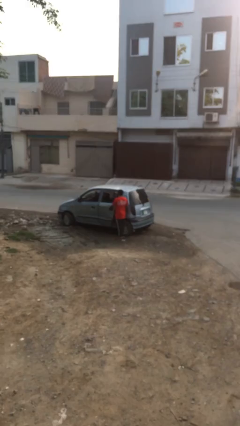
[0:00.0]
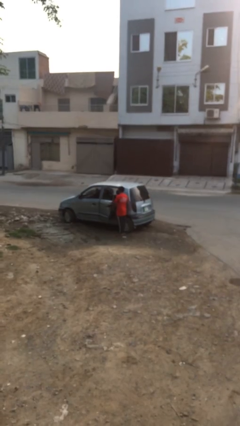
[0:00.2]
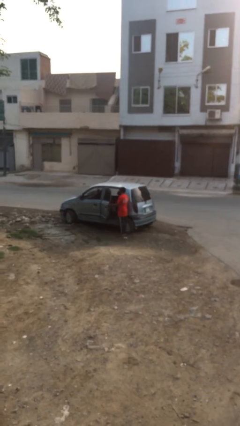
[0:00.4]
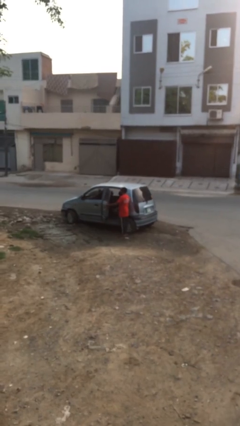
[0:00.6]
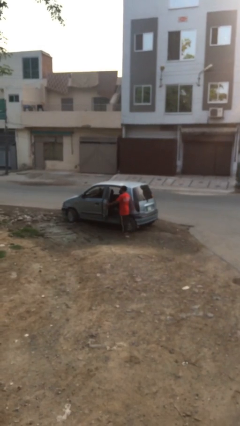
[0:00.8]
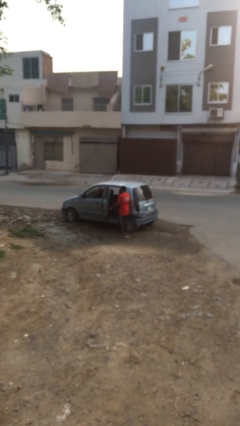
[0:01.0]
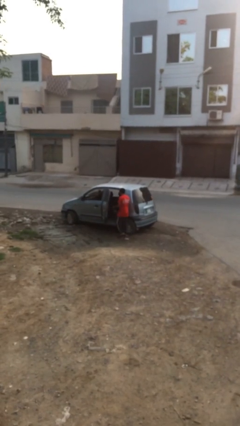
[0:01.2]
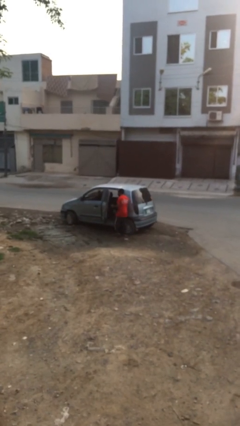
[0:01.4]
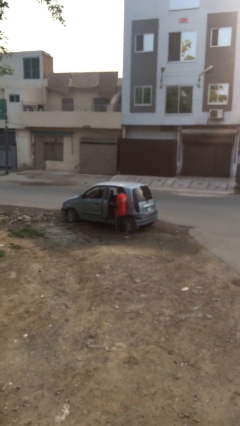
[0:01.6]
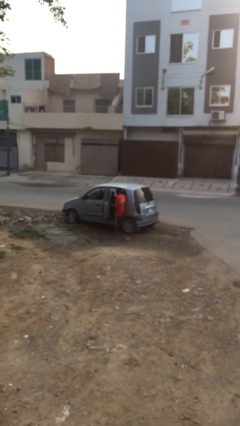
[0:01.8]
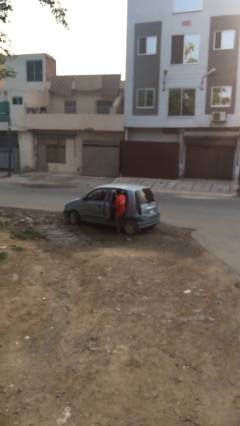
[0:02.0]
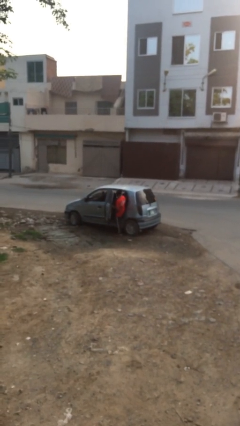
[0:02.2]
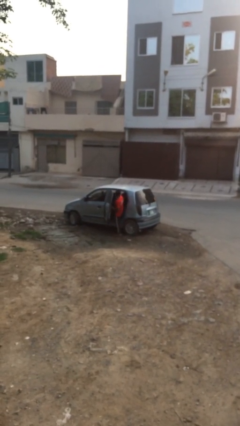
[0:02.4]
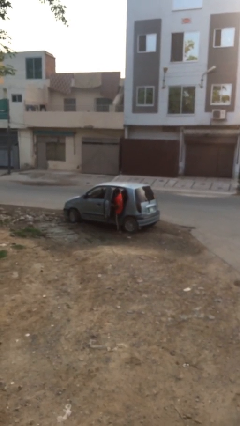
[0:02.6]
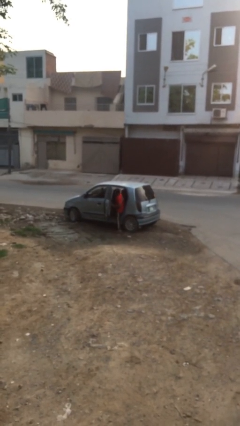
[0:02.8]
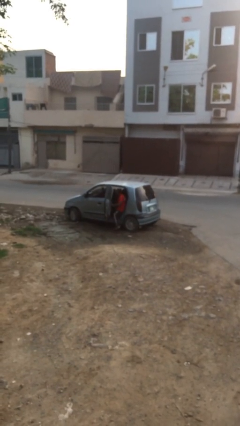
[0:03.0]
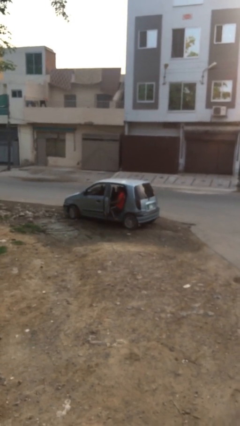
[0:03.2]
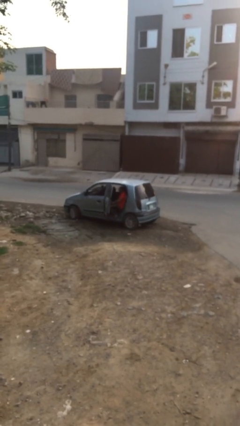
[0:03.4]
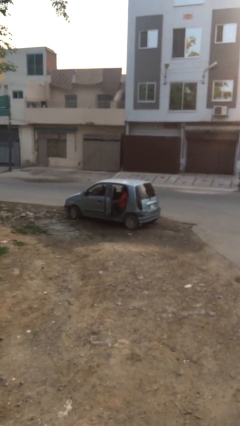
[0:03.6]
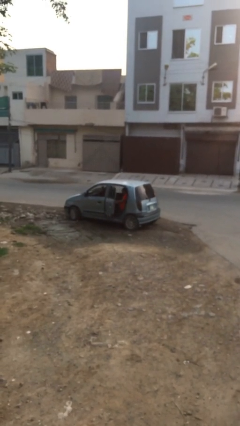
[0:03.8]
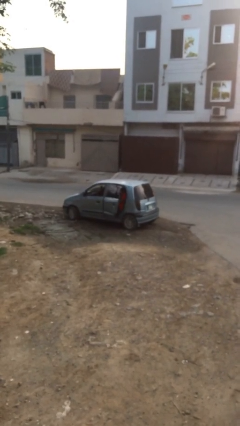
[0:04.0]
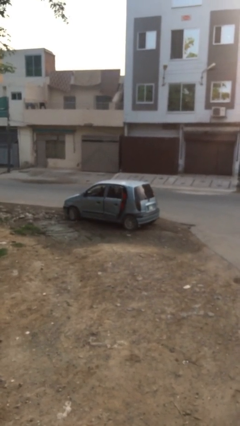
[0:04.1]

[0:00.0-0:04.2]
person enters car

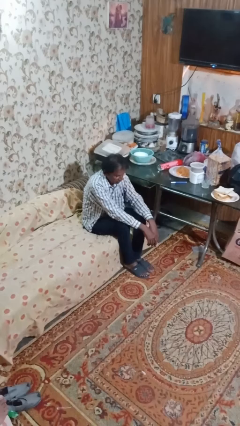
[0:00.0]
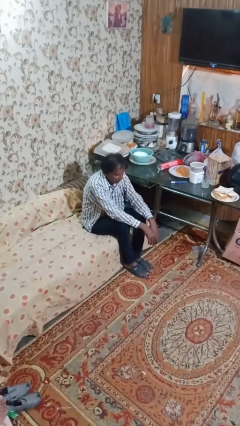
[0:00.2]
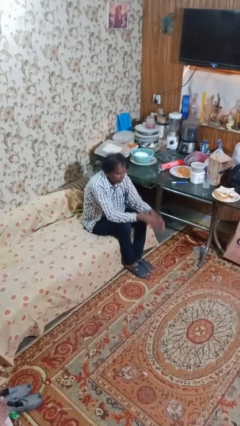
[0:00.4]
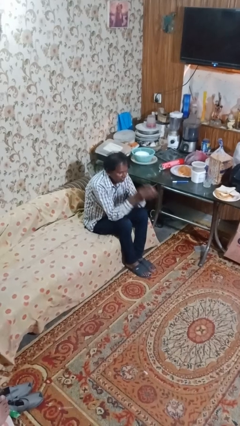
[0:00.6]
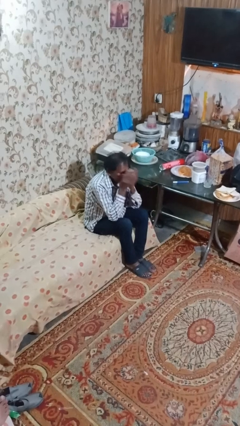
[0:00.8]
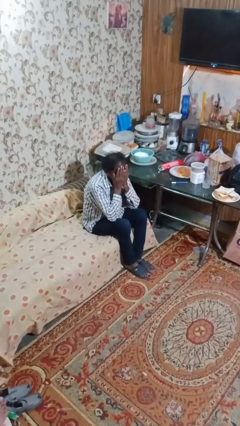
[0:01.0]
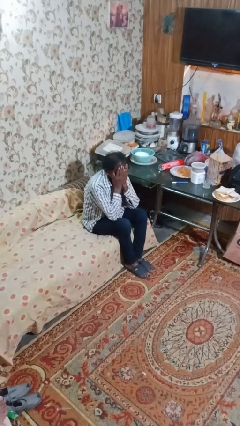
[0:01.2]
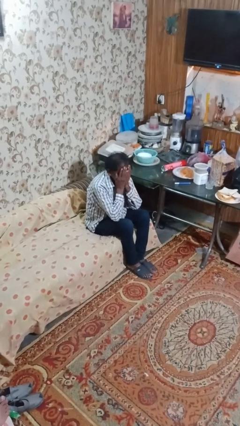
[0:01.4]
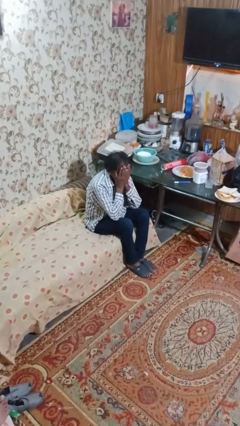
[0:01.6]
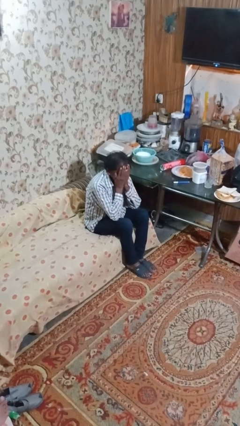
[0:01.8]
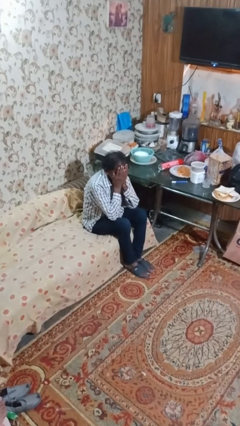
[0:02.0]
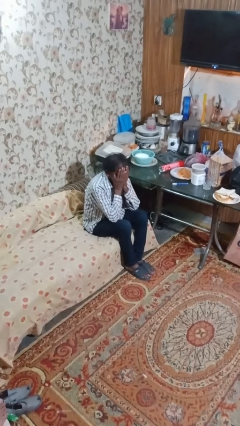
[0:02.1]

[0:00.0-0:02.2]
person covers face with hands

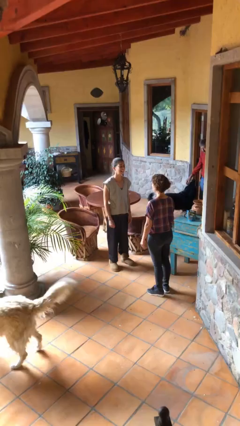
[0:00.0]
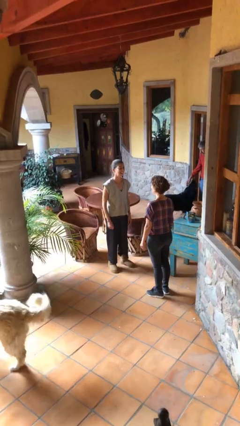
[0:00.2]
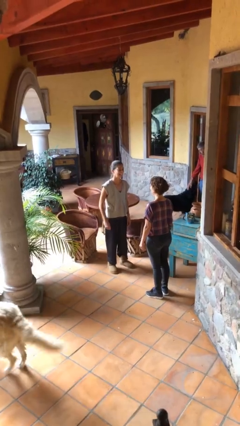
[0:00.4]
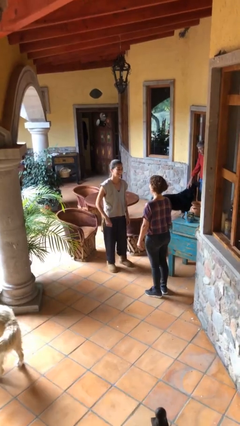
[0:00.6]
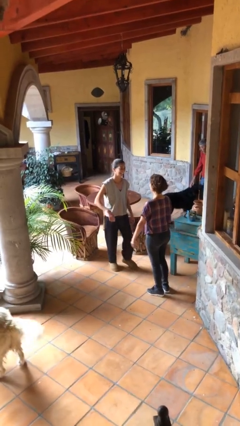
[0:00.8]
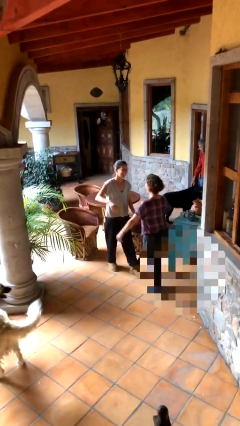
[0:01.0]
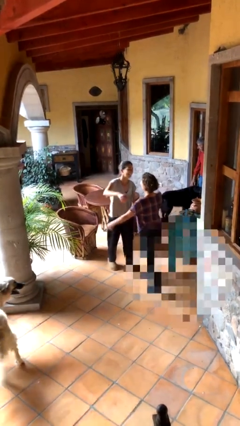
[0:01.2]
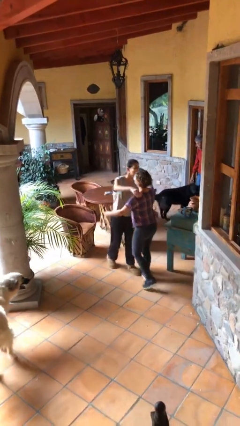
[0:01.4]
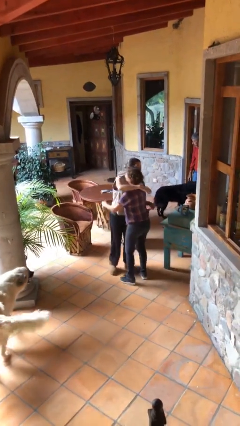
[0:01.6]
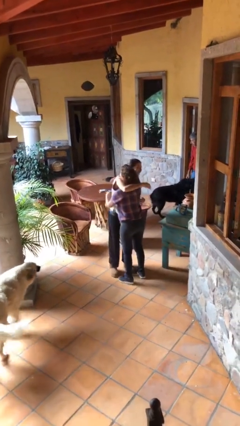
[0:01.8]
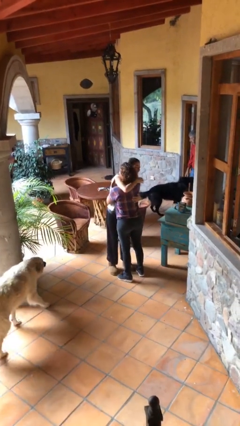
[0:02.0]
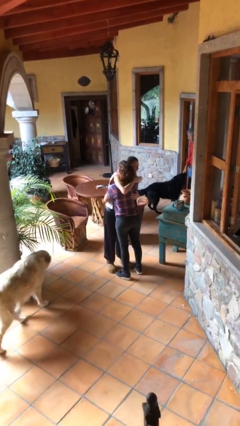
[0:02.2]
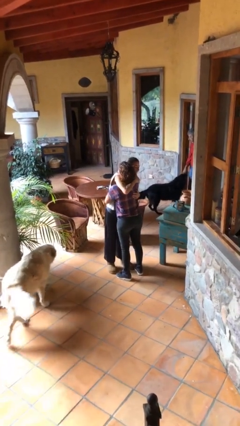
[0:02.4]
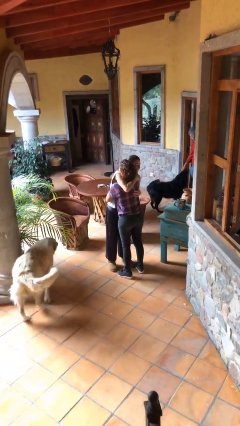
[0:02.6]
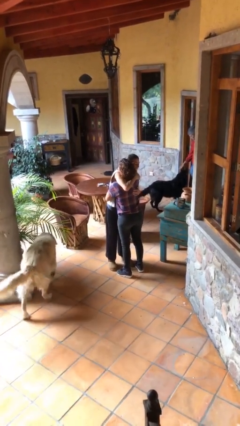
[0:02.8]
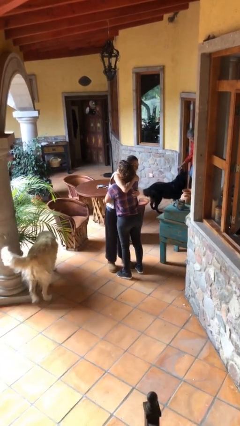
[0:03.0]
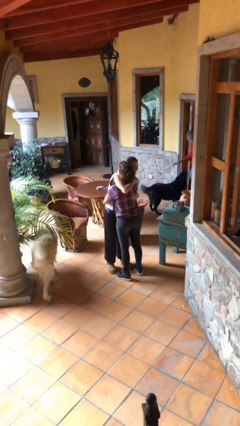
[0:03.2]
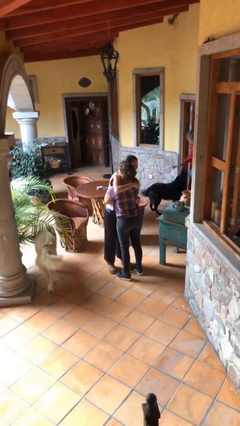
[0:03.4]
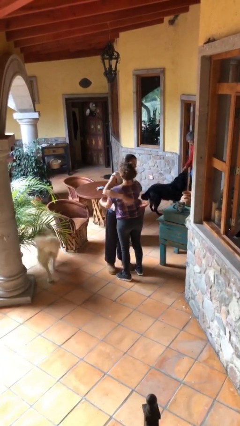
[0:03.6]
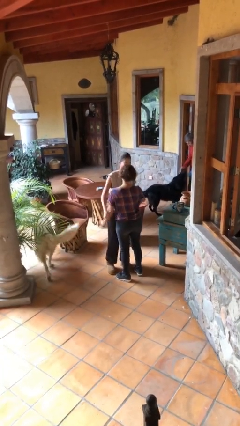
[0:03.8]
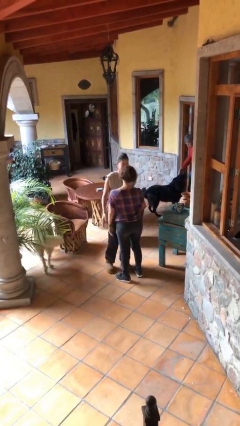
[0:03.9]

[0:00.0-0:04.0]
person embraces person

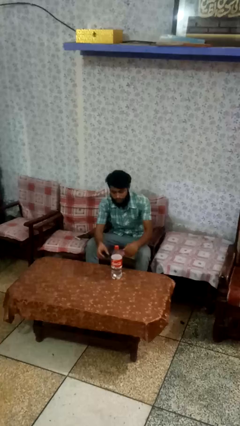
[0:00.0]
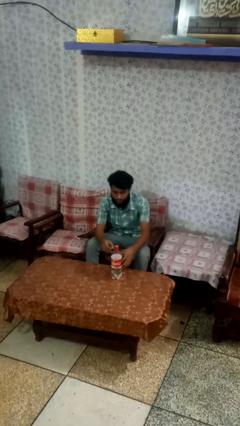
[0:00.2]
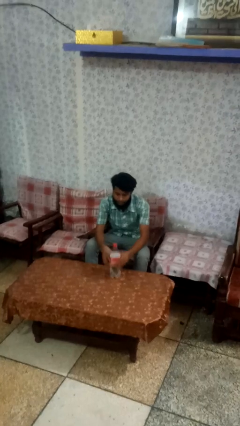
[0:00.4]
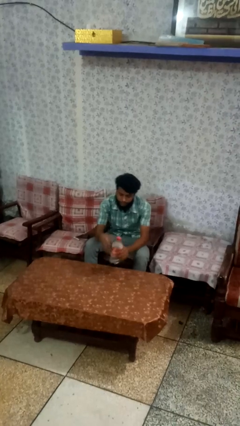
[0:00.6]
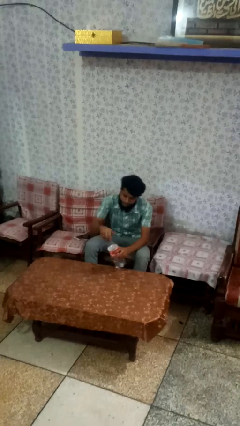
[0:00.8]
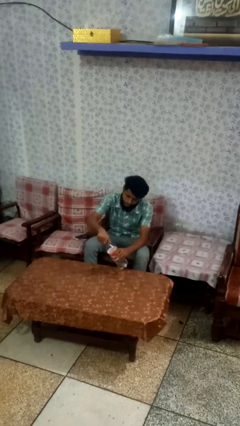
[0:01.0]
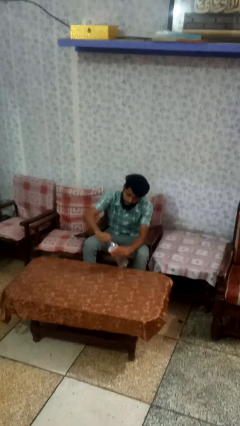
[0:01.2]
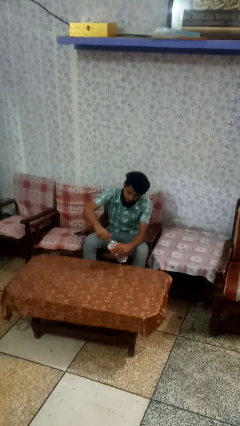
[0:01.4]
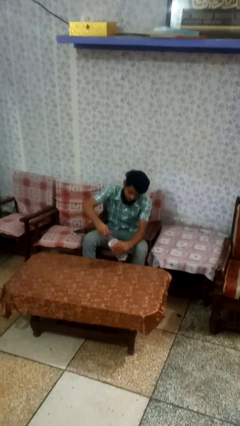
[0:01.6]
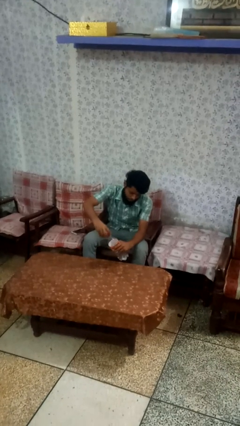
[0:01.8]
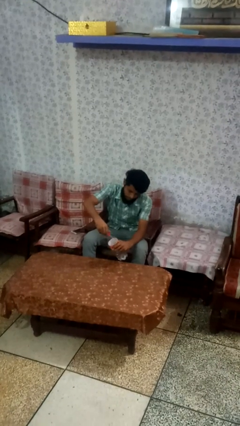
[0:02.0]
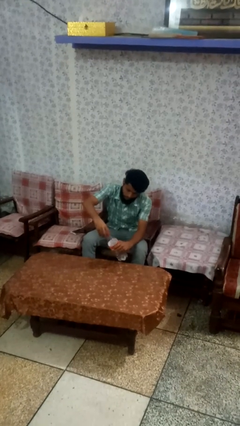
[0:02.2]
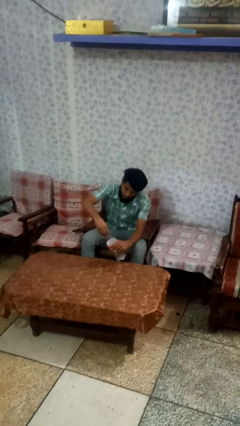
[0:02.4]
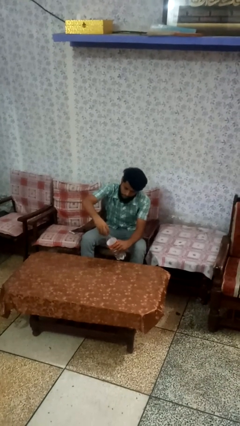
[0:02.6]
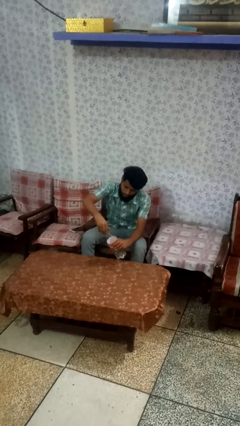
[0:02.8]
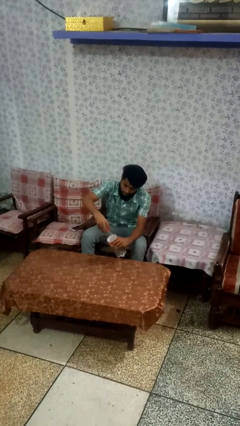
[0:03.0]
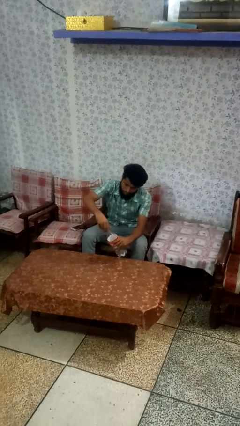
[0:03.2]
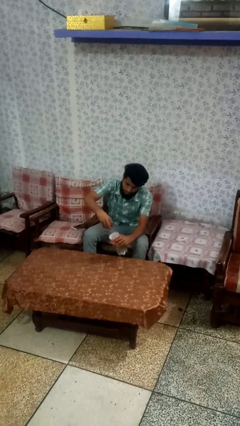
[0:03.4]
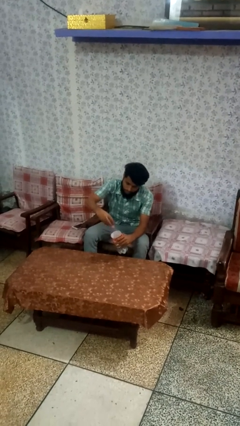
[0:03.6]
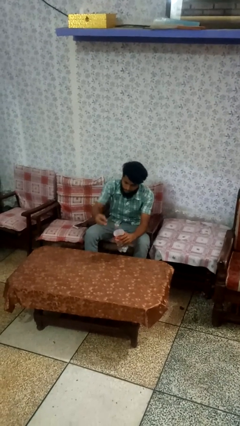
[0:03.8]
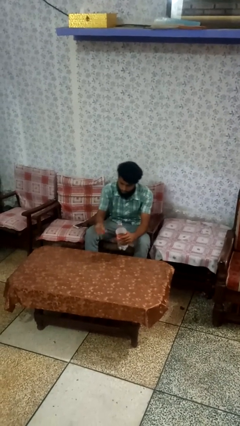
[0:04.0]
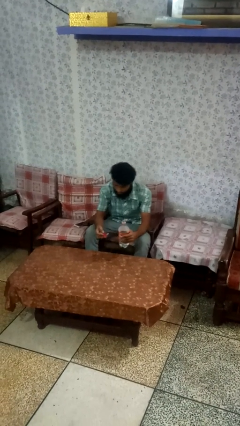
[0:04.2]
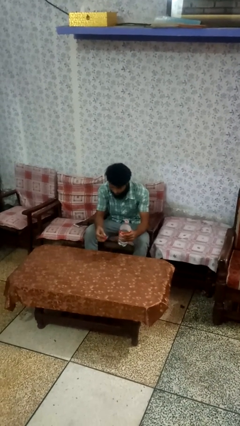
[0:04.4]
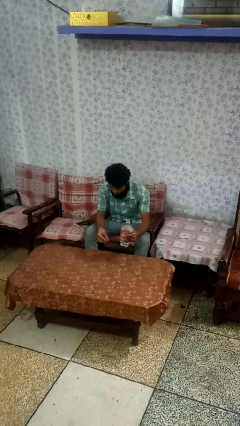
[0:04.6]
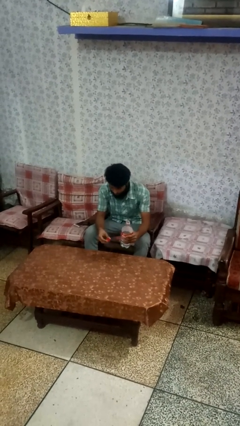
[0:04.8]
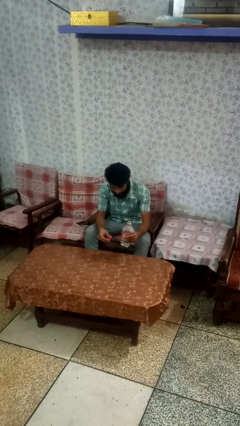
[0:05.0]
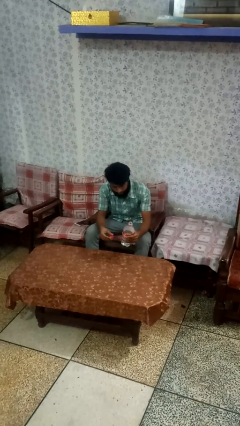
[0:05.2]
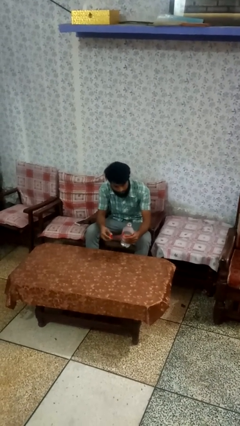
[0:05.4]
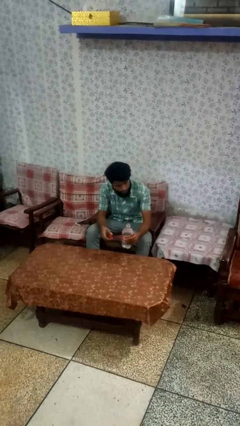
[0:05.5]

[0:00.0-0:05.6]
person unscrews lid from bottle

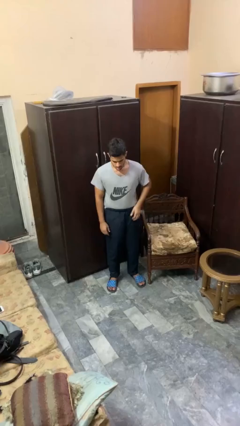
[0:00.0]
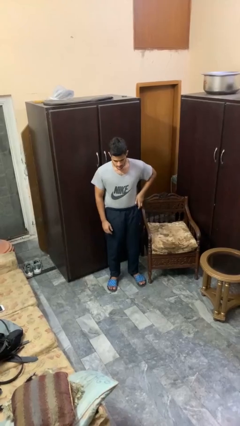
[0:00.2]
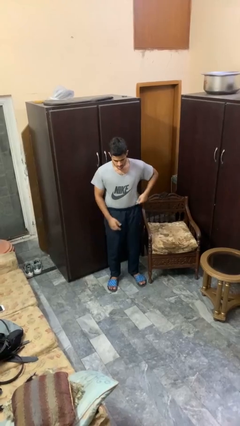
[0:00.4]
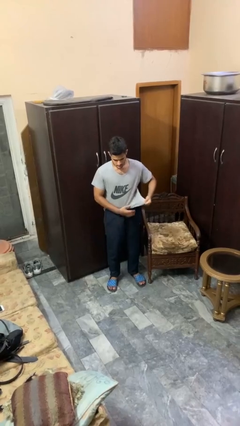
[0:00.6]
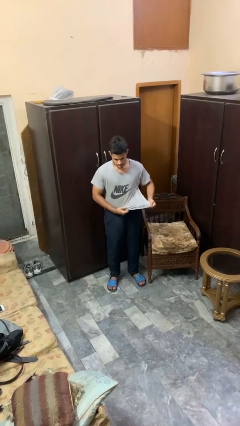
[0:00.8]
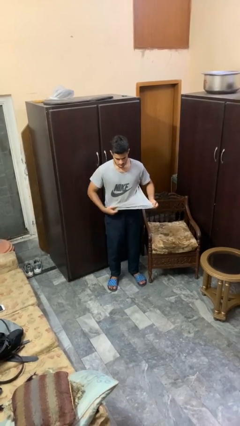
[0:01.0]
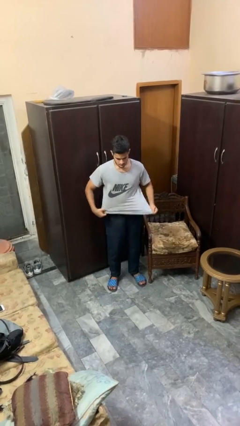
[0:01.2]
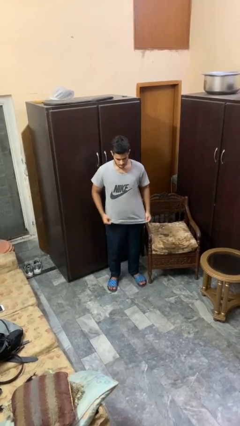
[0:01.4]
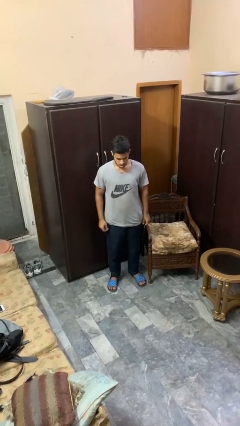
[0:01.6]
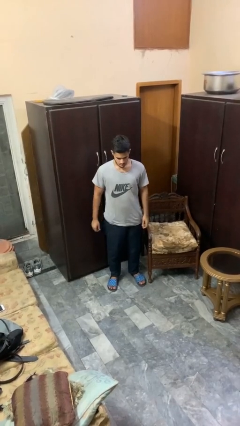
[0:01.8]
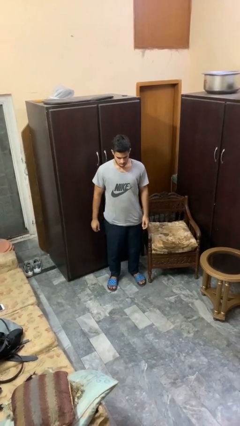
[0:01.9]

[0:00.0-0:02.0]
person untucks shirt
